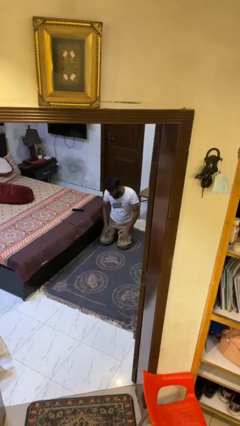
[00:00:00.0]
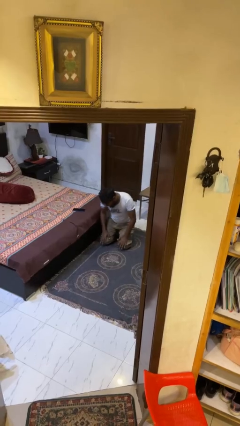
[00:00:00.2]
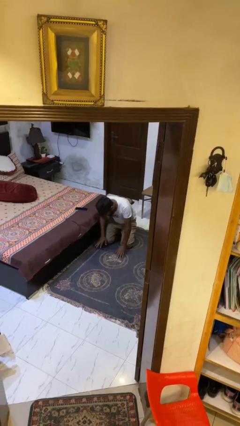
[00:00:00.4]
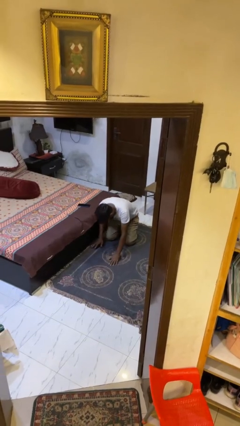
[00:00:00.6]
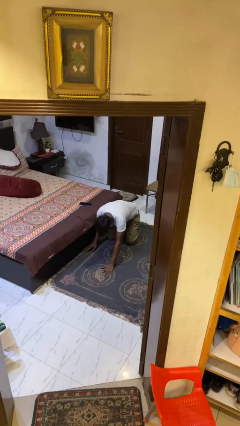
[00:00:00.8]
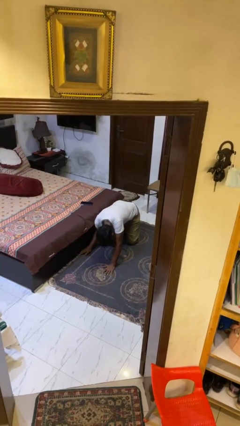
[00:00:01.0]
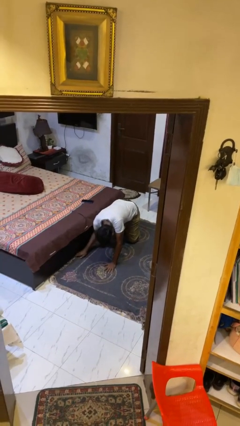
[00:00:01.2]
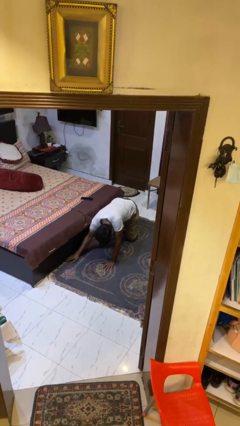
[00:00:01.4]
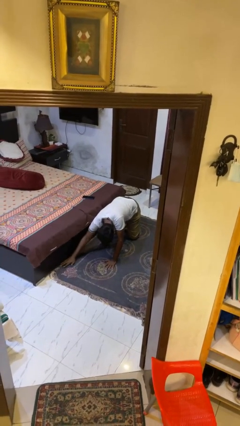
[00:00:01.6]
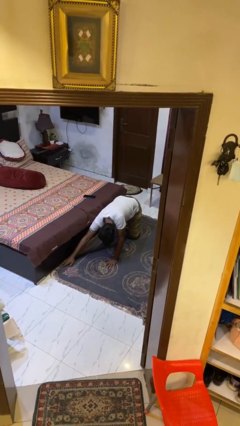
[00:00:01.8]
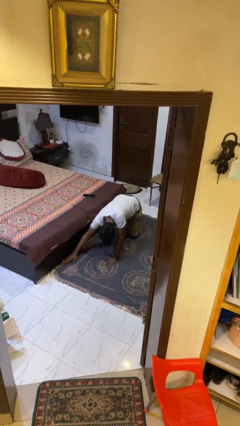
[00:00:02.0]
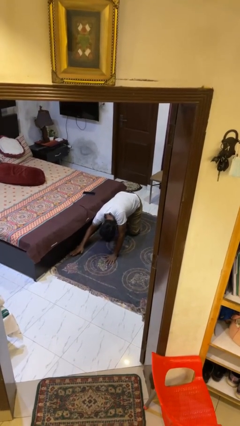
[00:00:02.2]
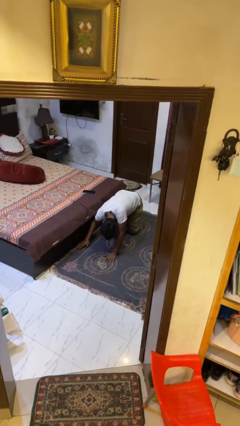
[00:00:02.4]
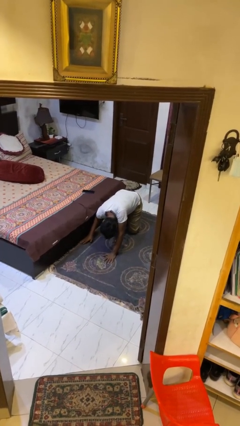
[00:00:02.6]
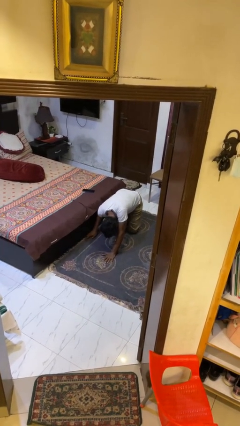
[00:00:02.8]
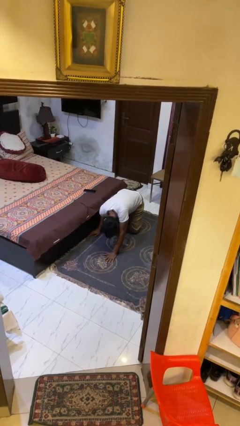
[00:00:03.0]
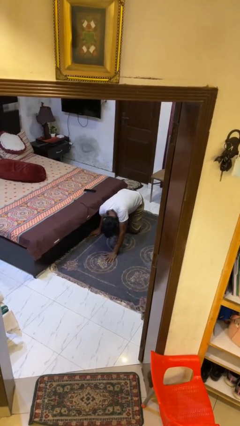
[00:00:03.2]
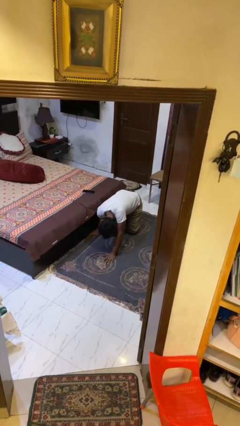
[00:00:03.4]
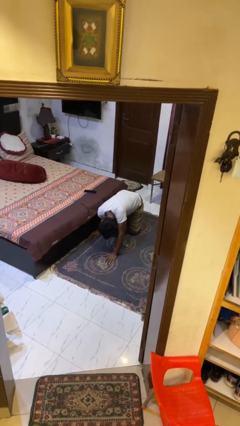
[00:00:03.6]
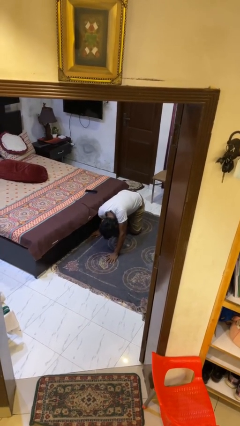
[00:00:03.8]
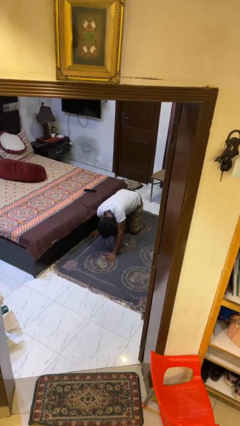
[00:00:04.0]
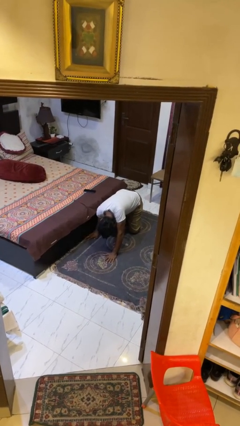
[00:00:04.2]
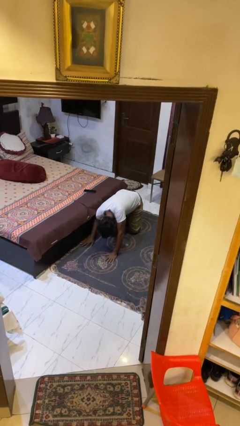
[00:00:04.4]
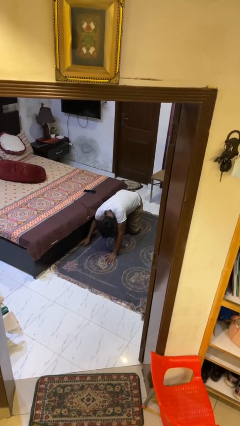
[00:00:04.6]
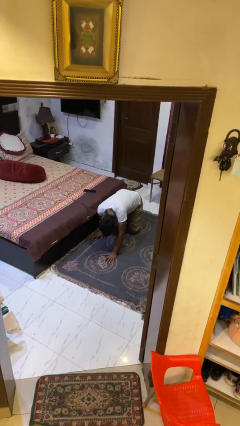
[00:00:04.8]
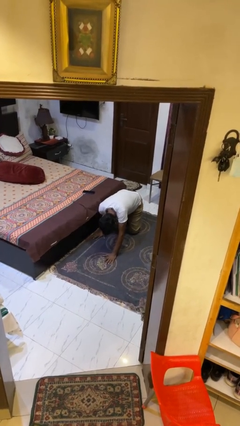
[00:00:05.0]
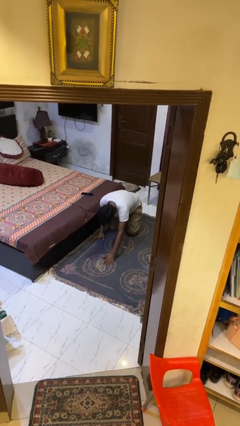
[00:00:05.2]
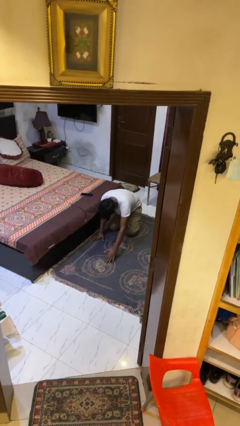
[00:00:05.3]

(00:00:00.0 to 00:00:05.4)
person searches under bed

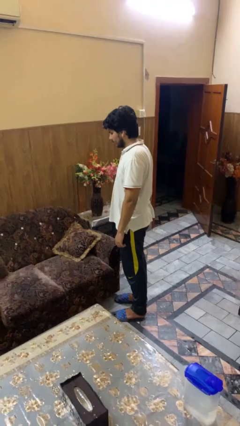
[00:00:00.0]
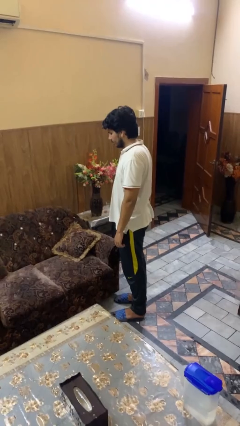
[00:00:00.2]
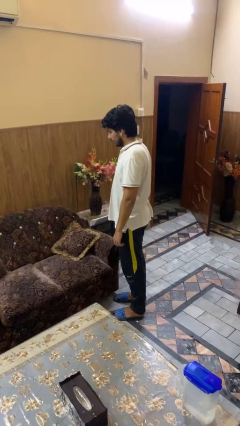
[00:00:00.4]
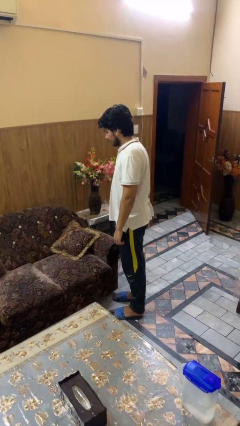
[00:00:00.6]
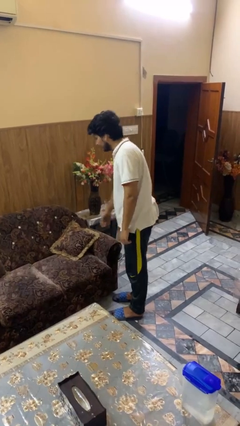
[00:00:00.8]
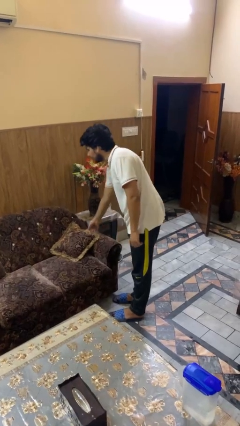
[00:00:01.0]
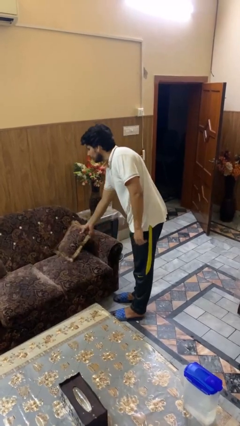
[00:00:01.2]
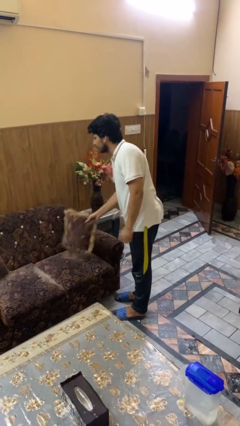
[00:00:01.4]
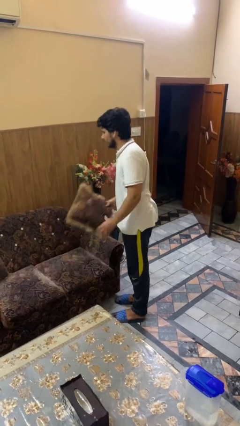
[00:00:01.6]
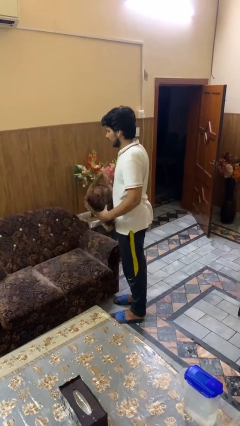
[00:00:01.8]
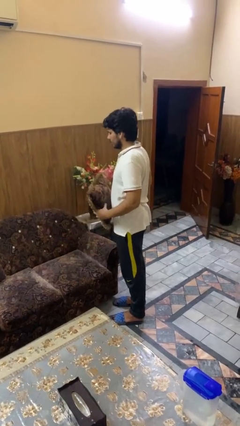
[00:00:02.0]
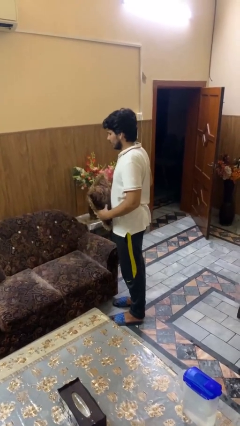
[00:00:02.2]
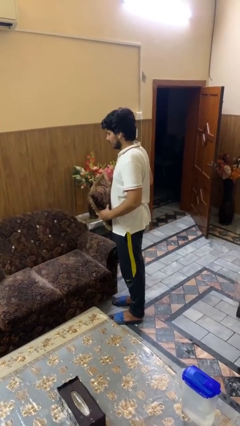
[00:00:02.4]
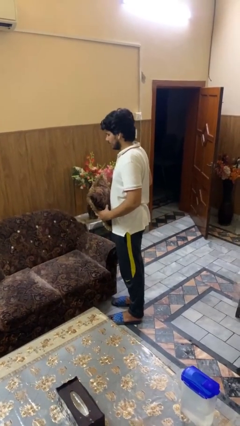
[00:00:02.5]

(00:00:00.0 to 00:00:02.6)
person picks up object from couch

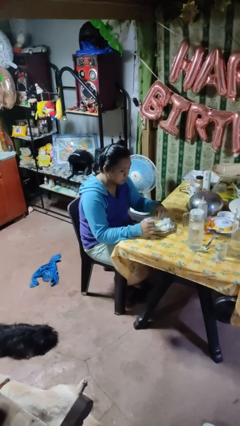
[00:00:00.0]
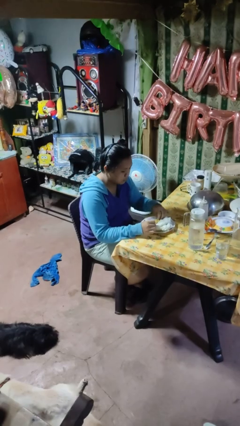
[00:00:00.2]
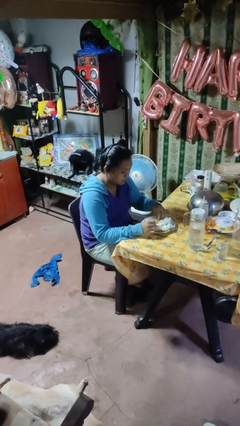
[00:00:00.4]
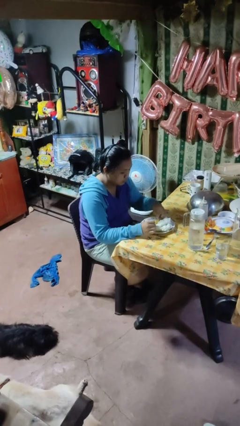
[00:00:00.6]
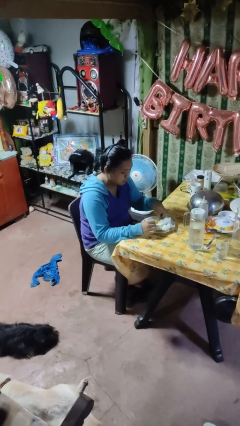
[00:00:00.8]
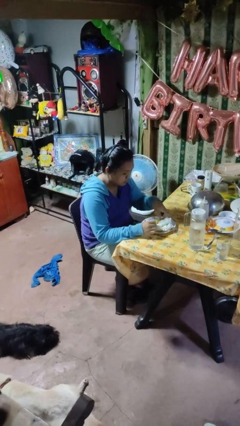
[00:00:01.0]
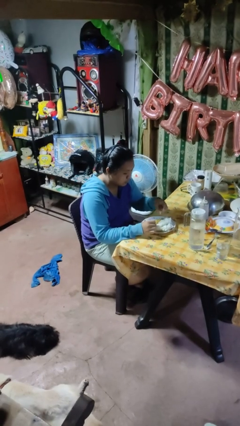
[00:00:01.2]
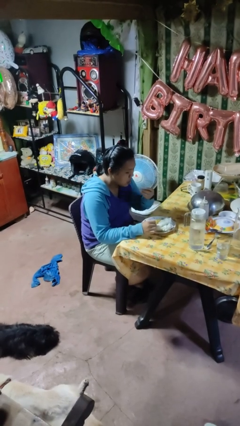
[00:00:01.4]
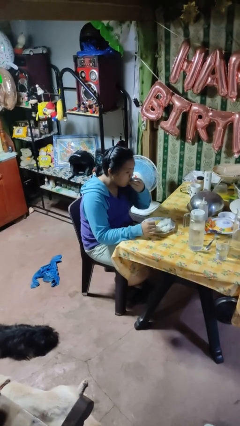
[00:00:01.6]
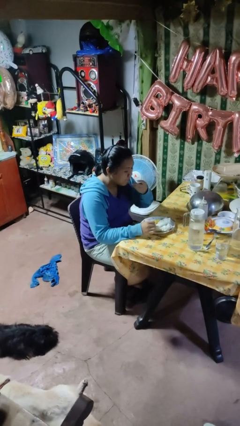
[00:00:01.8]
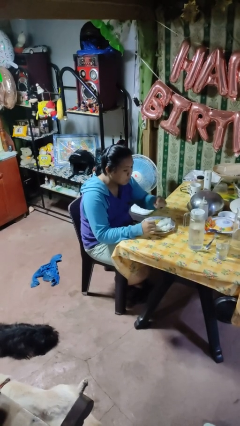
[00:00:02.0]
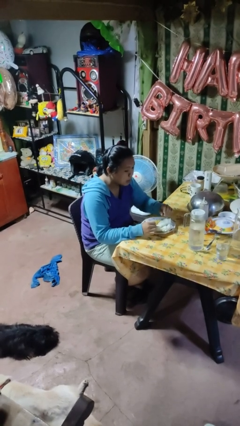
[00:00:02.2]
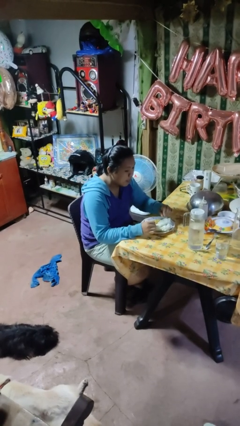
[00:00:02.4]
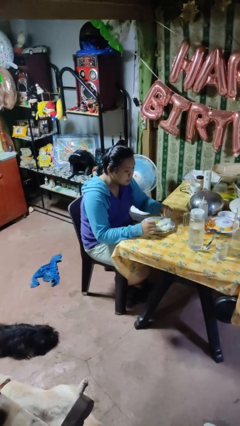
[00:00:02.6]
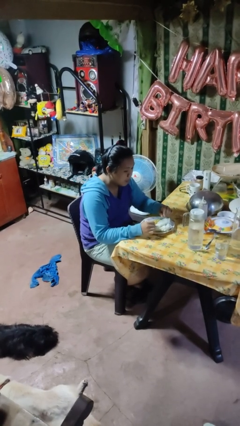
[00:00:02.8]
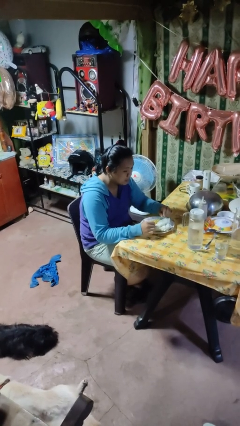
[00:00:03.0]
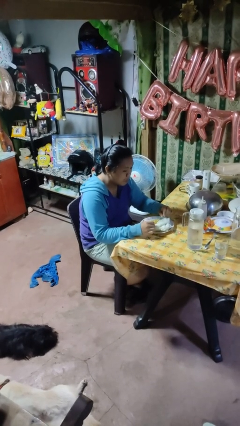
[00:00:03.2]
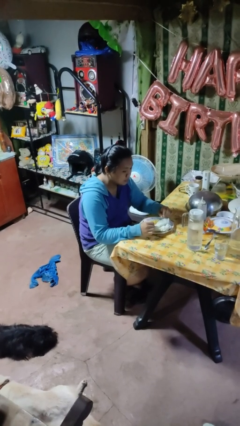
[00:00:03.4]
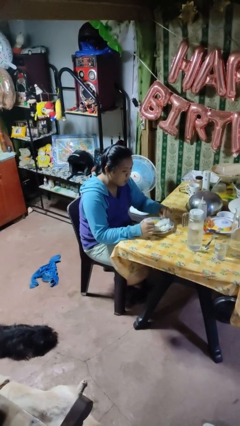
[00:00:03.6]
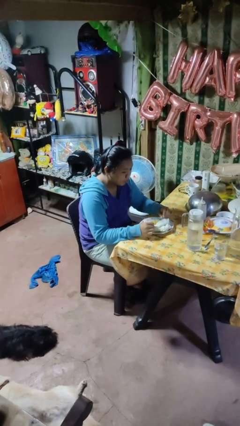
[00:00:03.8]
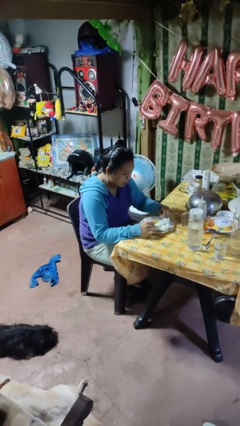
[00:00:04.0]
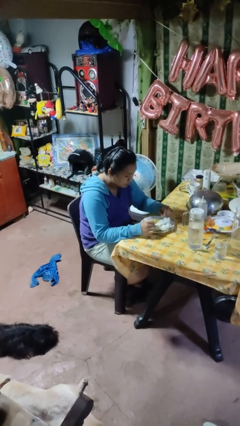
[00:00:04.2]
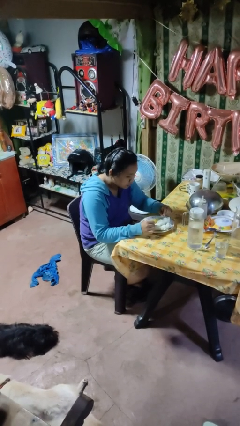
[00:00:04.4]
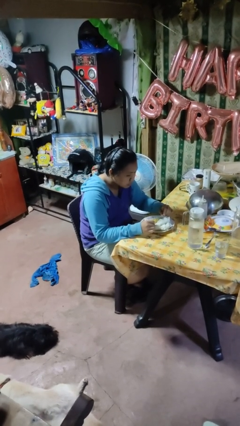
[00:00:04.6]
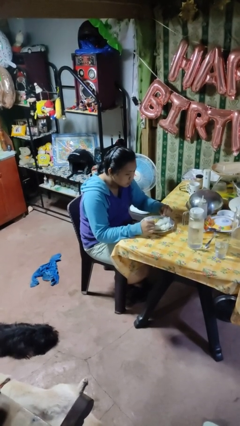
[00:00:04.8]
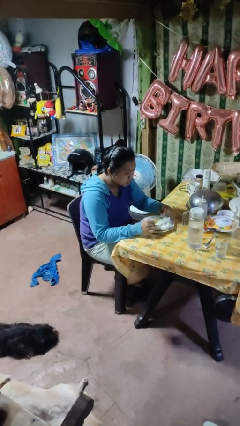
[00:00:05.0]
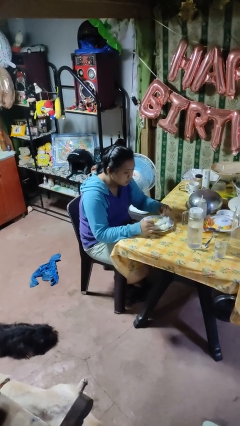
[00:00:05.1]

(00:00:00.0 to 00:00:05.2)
person eats with hands

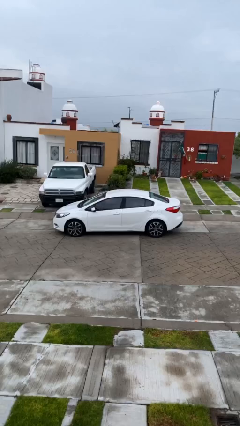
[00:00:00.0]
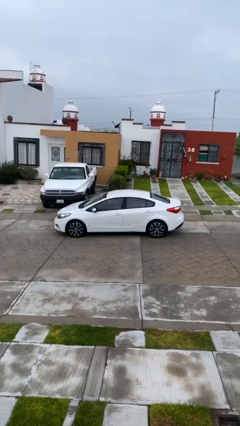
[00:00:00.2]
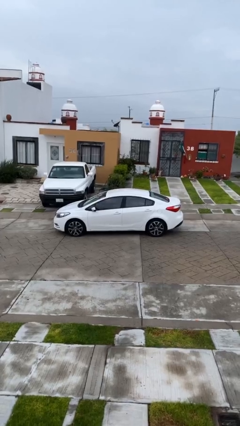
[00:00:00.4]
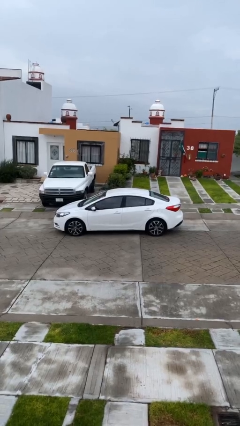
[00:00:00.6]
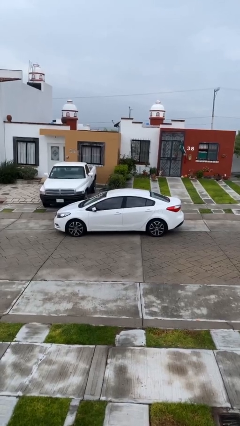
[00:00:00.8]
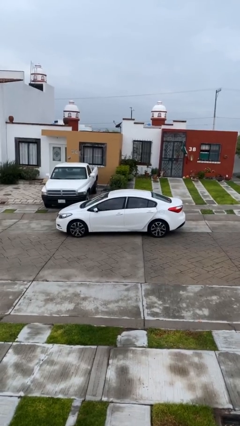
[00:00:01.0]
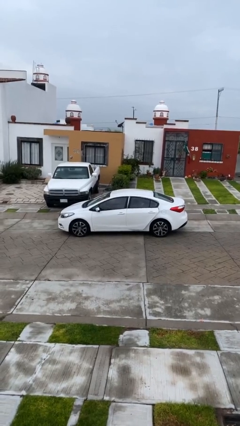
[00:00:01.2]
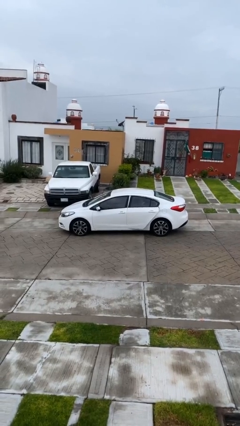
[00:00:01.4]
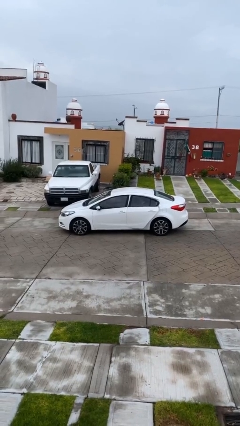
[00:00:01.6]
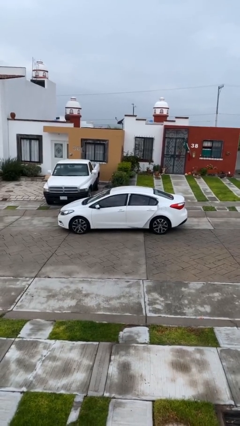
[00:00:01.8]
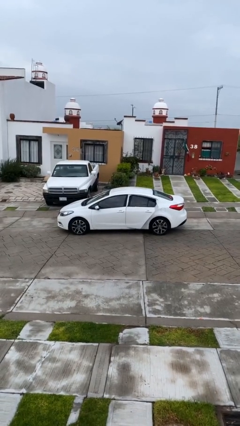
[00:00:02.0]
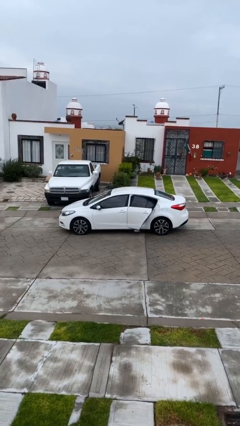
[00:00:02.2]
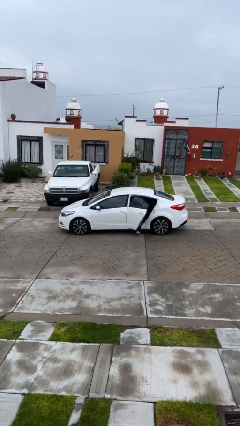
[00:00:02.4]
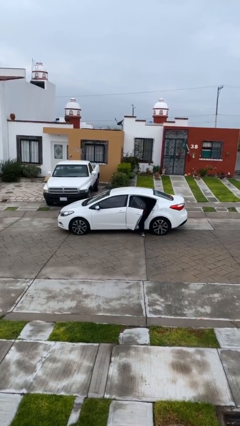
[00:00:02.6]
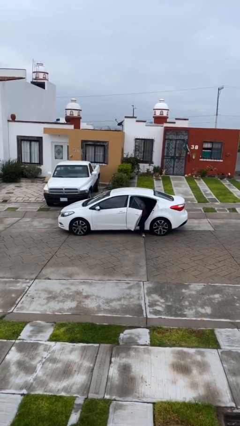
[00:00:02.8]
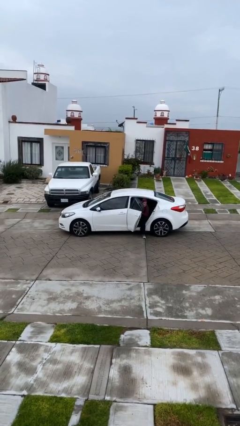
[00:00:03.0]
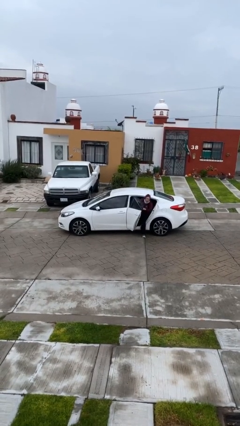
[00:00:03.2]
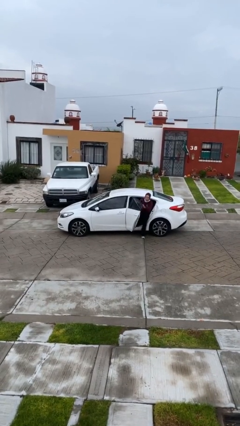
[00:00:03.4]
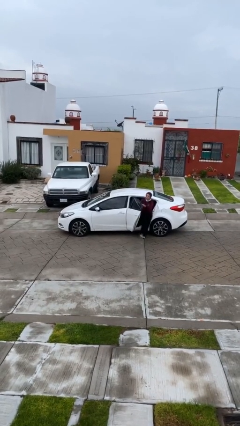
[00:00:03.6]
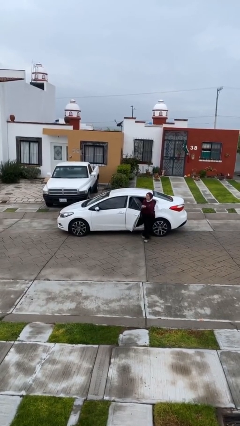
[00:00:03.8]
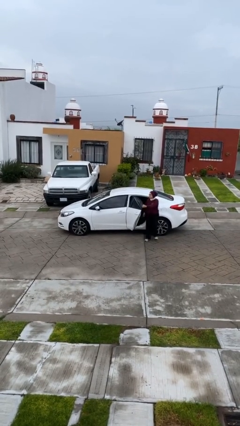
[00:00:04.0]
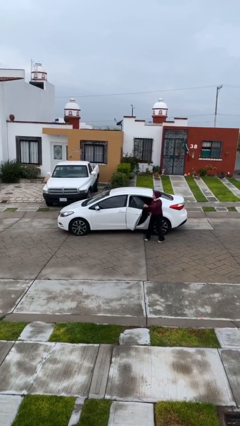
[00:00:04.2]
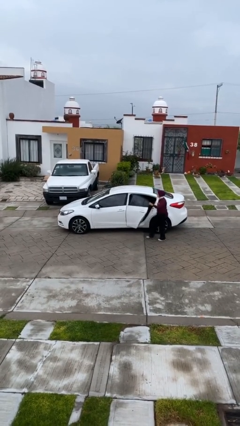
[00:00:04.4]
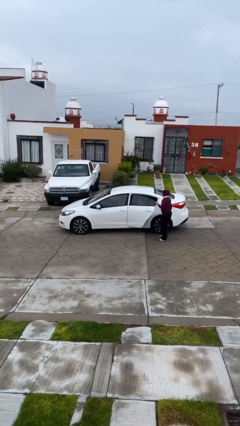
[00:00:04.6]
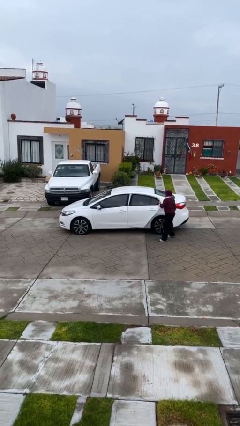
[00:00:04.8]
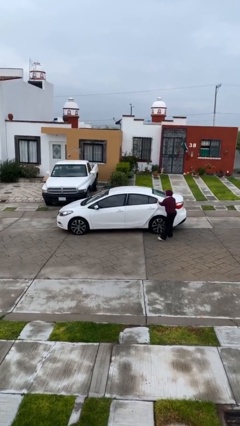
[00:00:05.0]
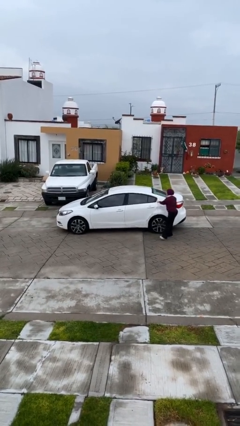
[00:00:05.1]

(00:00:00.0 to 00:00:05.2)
car drops off person
